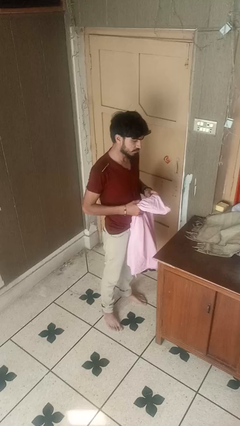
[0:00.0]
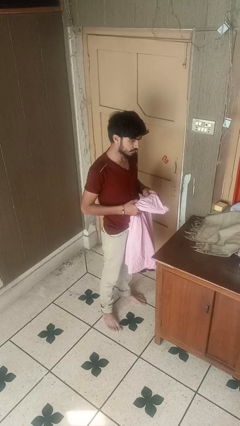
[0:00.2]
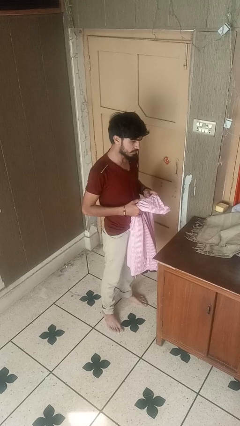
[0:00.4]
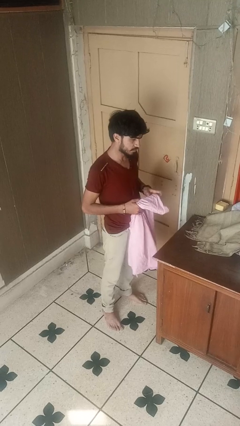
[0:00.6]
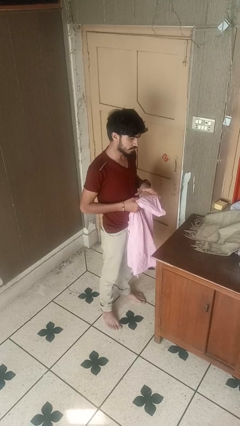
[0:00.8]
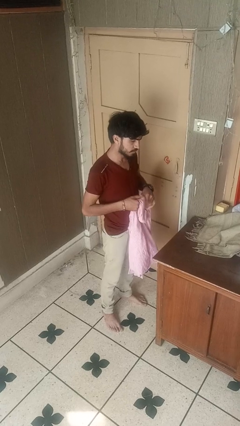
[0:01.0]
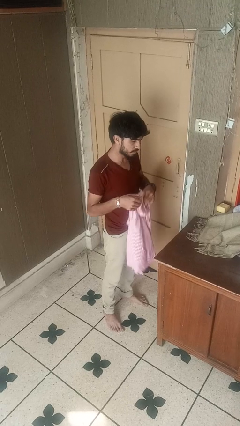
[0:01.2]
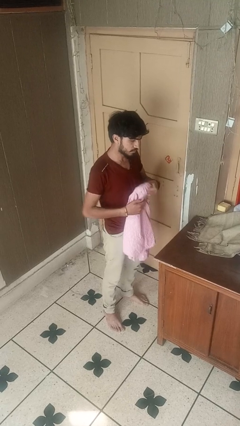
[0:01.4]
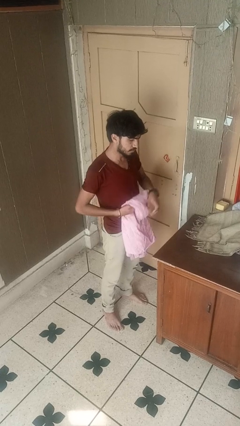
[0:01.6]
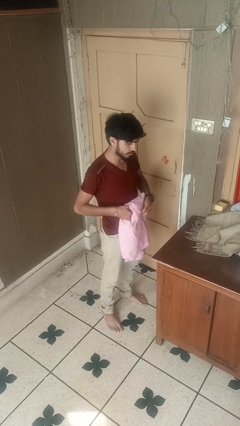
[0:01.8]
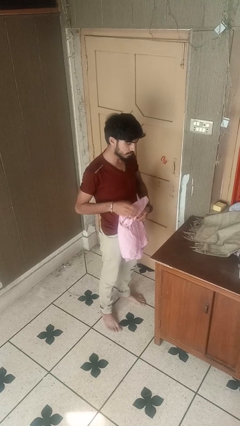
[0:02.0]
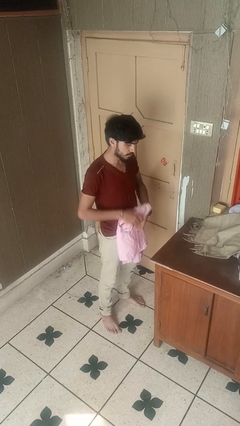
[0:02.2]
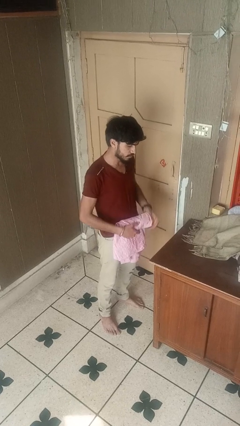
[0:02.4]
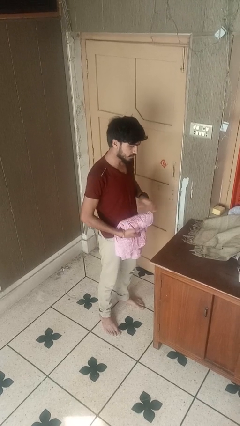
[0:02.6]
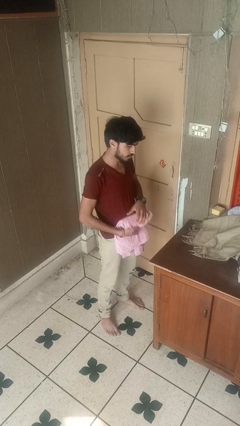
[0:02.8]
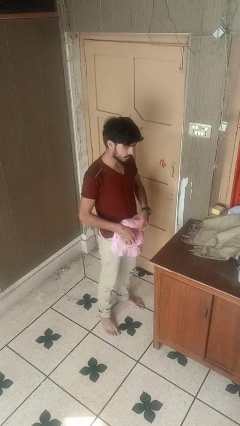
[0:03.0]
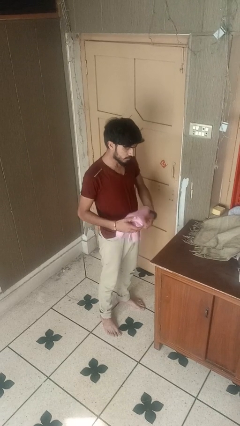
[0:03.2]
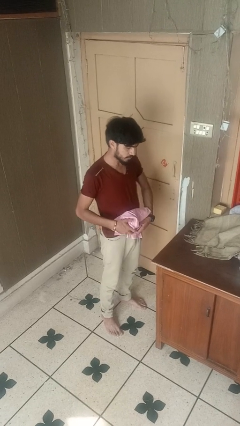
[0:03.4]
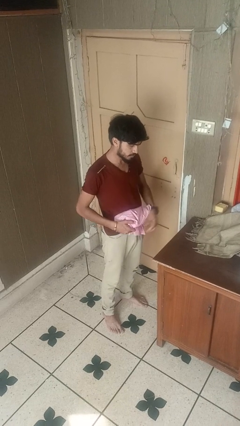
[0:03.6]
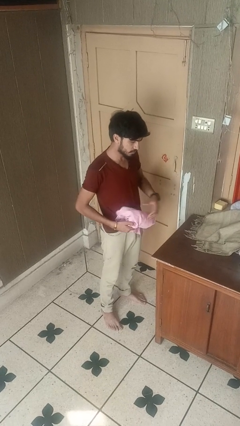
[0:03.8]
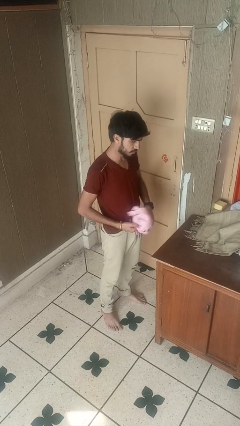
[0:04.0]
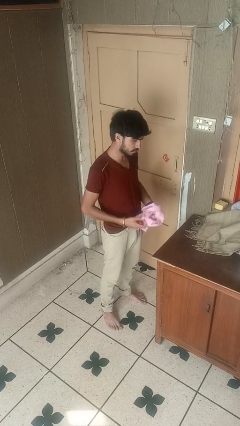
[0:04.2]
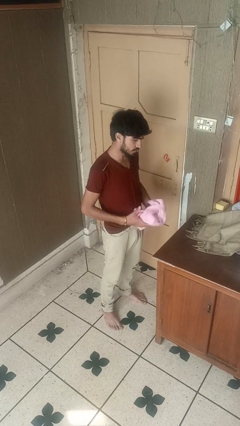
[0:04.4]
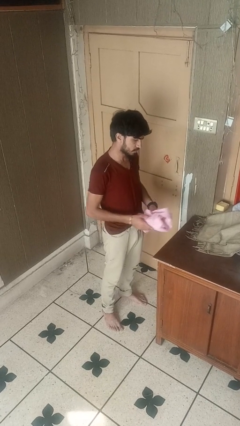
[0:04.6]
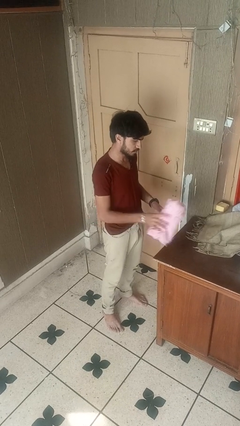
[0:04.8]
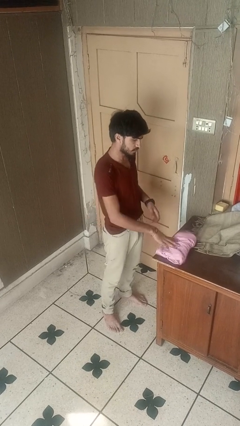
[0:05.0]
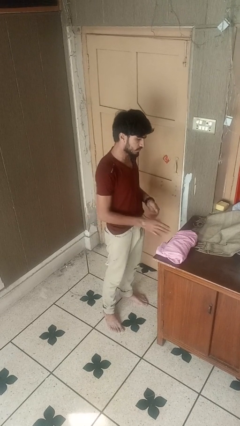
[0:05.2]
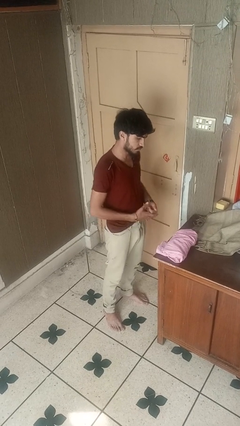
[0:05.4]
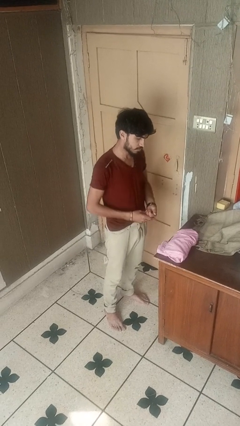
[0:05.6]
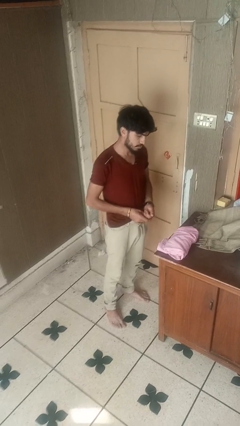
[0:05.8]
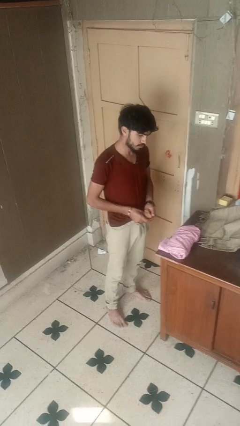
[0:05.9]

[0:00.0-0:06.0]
person folds shirt

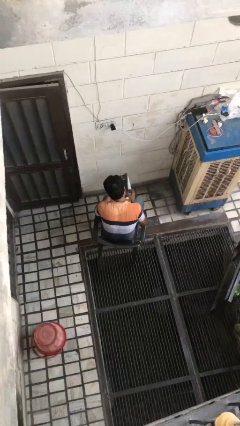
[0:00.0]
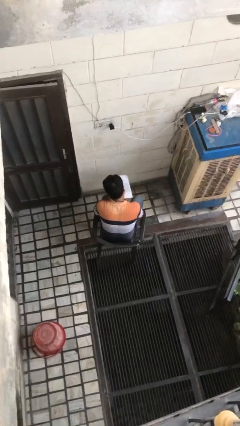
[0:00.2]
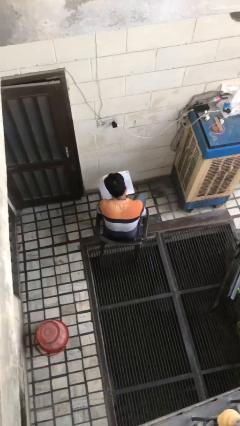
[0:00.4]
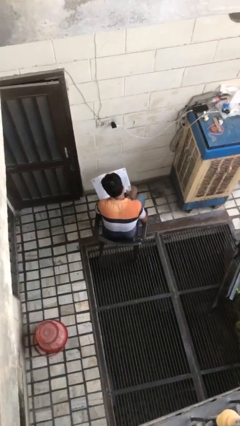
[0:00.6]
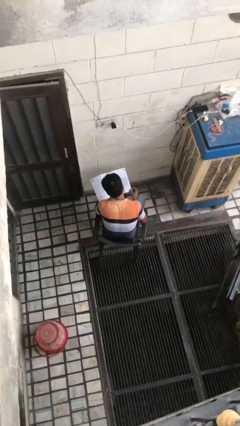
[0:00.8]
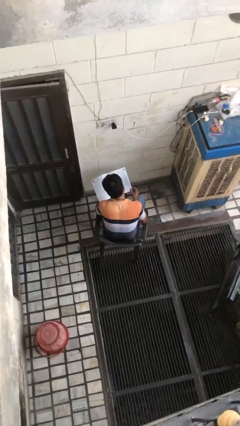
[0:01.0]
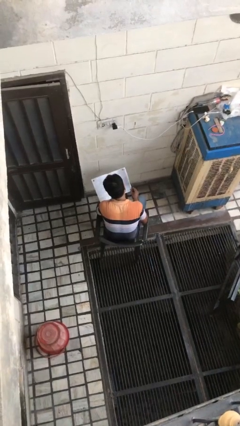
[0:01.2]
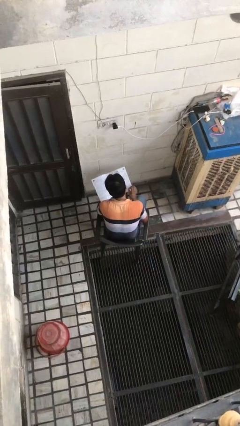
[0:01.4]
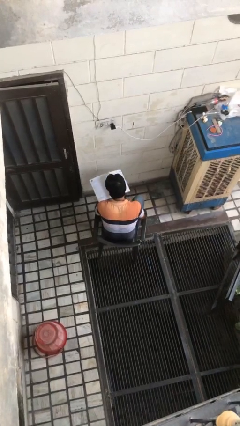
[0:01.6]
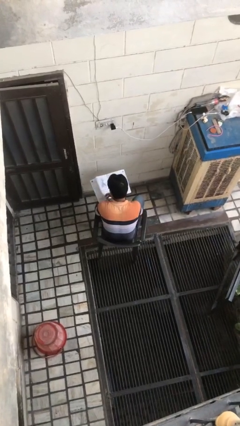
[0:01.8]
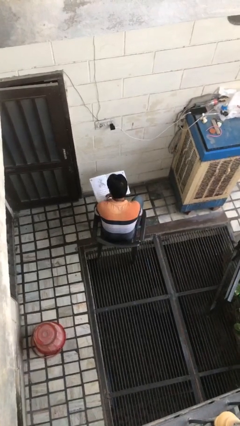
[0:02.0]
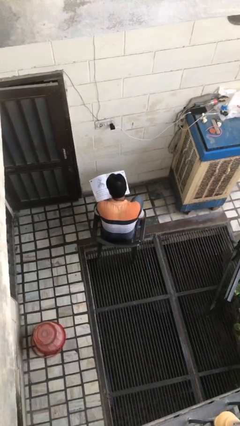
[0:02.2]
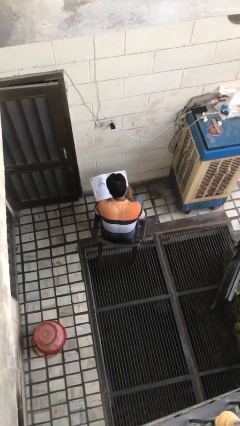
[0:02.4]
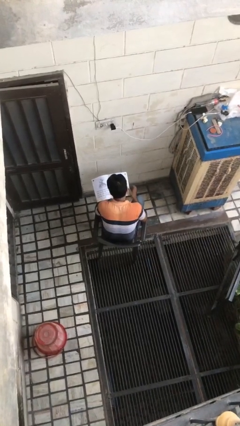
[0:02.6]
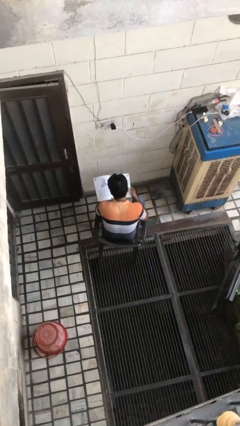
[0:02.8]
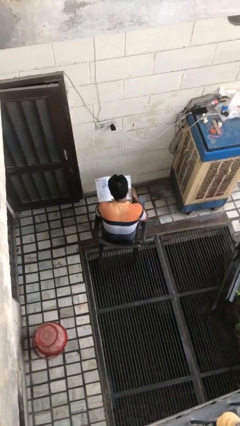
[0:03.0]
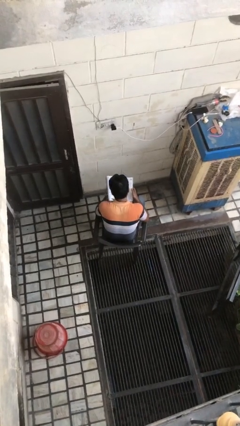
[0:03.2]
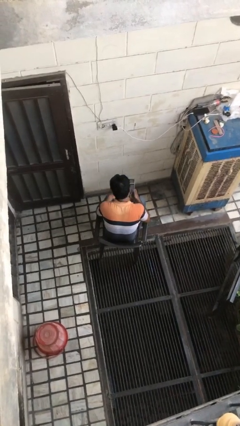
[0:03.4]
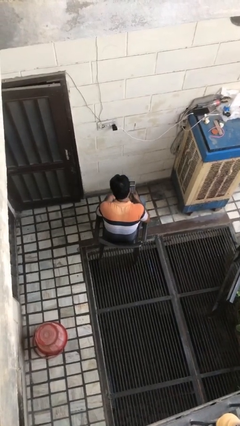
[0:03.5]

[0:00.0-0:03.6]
person reads magazine

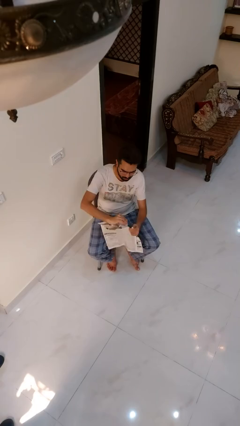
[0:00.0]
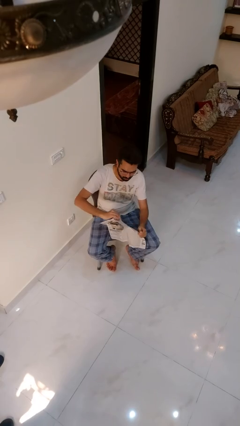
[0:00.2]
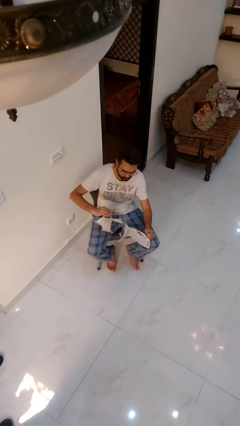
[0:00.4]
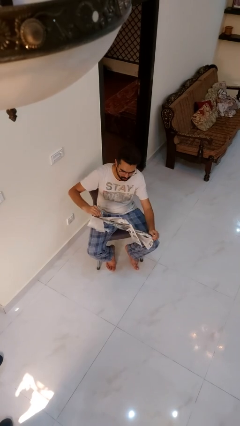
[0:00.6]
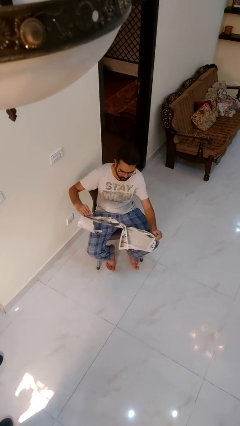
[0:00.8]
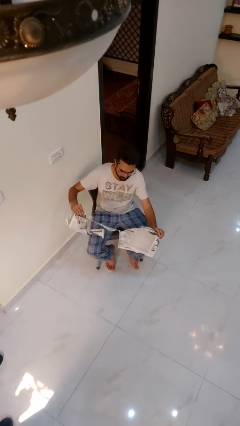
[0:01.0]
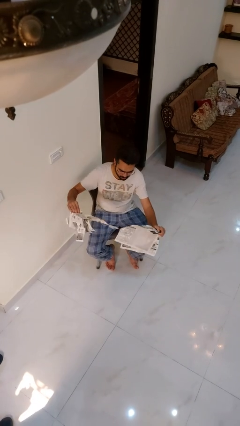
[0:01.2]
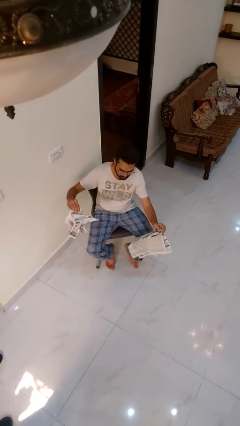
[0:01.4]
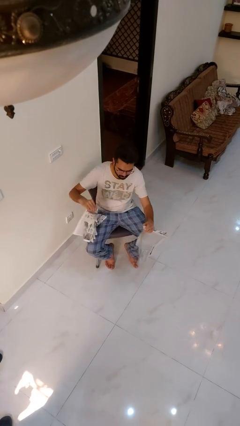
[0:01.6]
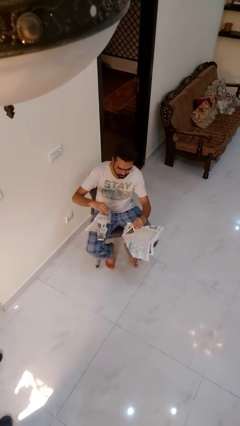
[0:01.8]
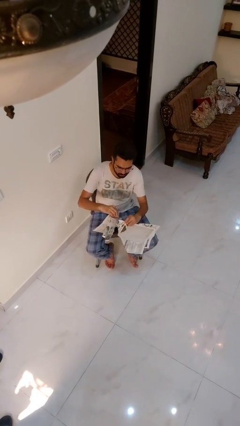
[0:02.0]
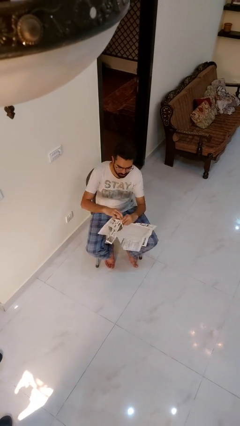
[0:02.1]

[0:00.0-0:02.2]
person tears paper

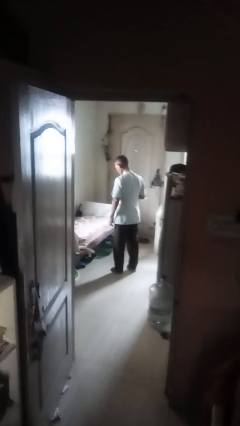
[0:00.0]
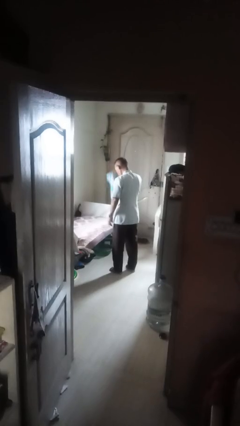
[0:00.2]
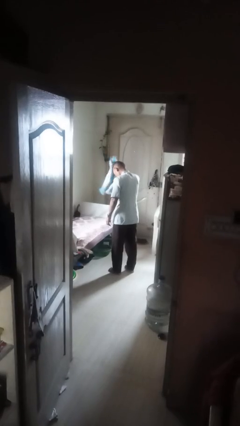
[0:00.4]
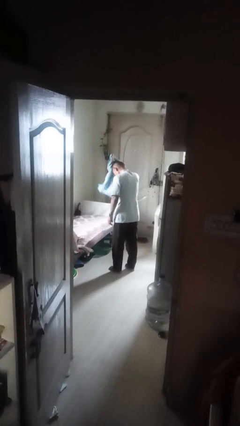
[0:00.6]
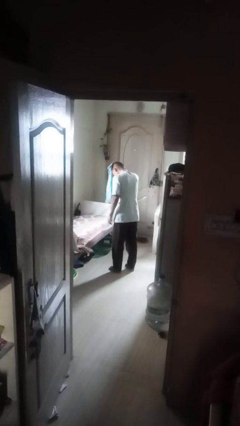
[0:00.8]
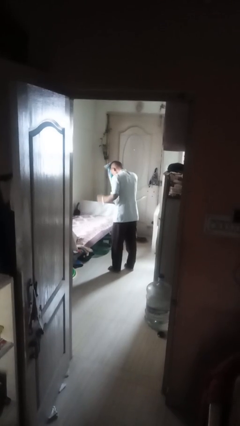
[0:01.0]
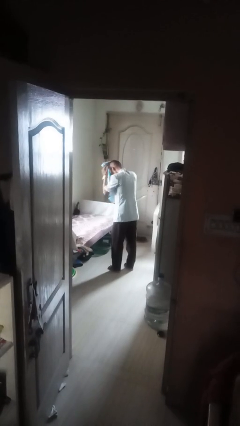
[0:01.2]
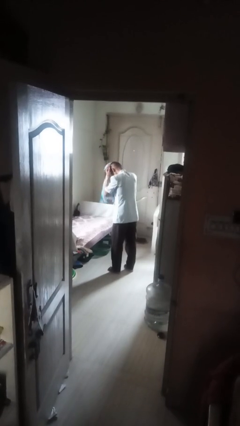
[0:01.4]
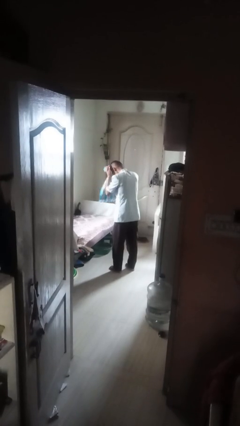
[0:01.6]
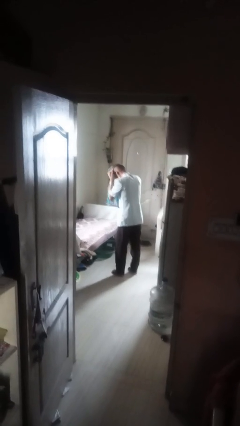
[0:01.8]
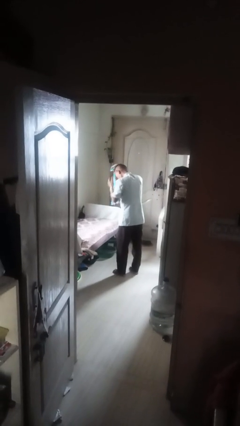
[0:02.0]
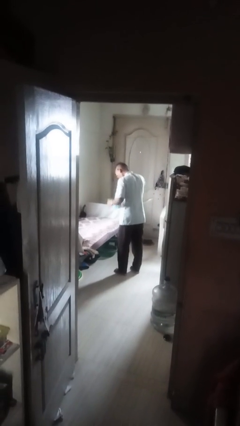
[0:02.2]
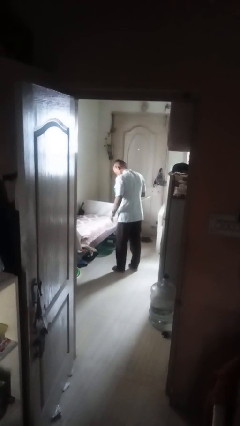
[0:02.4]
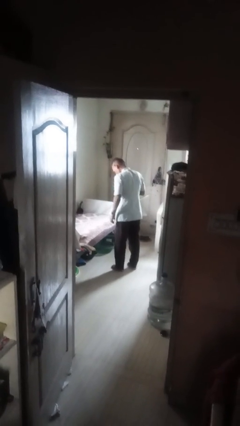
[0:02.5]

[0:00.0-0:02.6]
person dries hair with towel

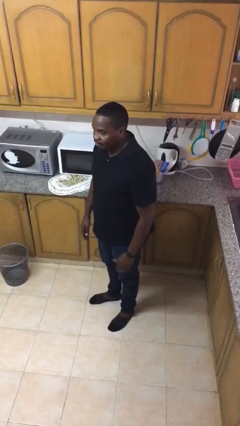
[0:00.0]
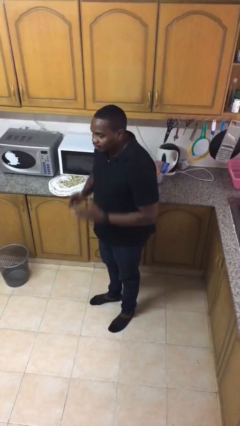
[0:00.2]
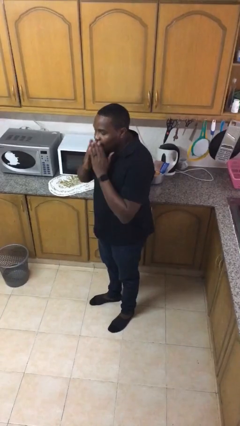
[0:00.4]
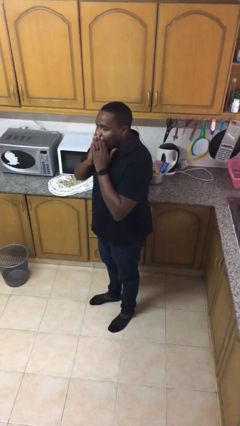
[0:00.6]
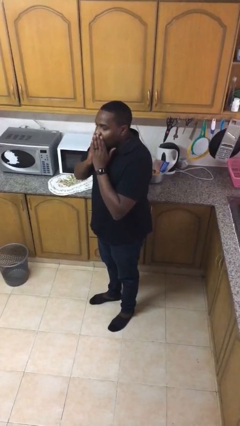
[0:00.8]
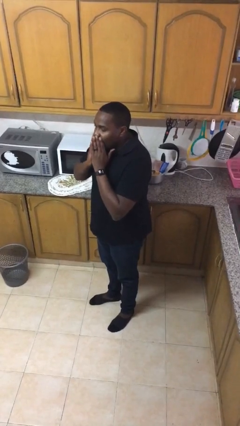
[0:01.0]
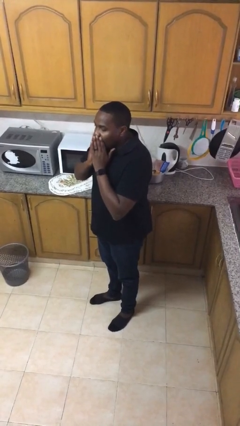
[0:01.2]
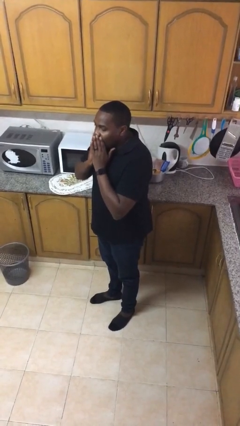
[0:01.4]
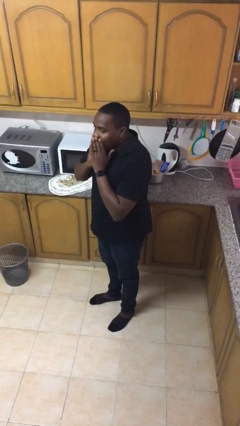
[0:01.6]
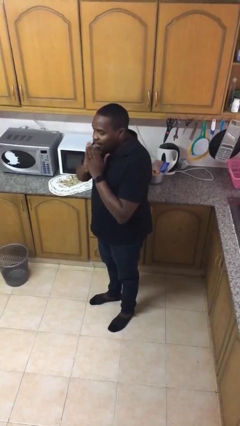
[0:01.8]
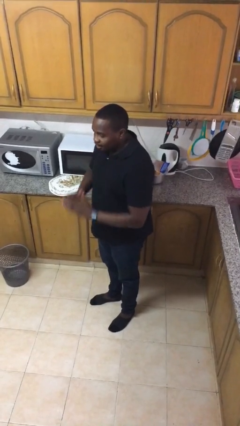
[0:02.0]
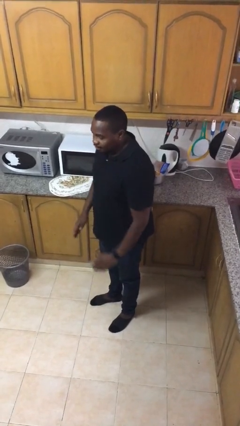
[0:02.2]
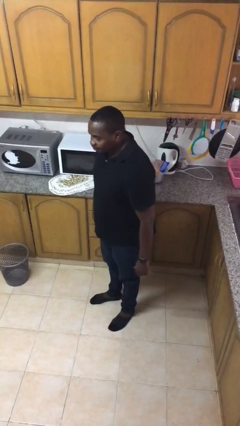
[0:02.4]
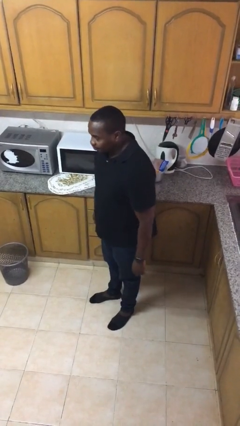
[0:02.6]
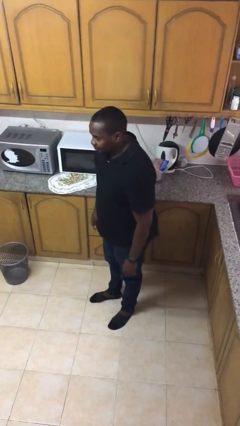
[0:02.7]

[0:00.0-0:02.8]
person yawns

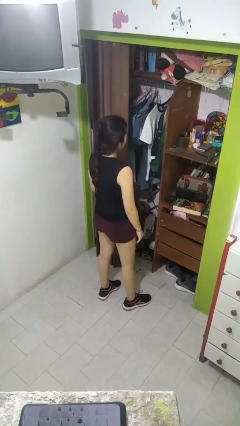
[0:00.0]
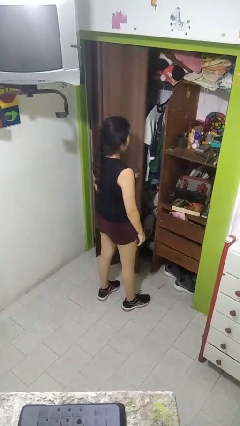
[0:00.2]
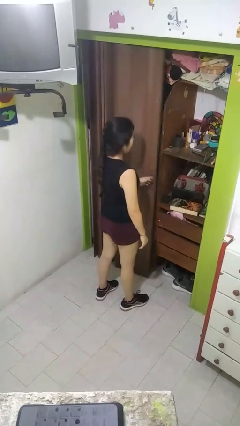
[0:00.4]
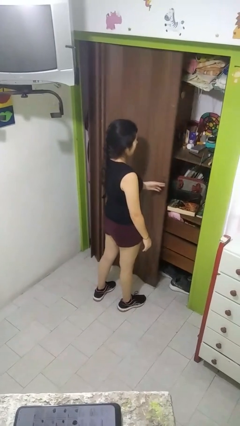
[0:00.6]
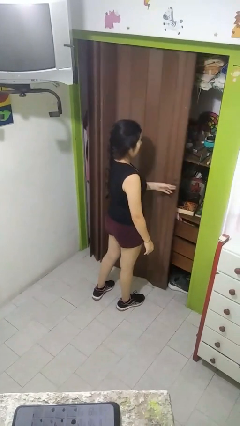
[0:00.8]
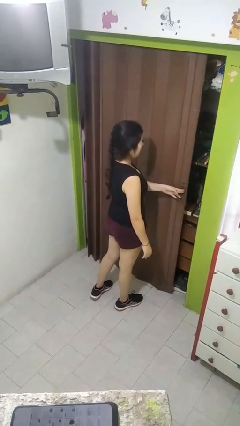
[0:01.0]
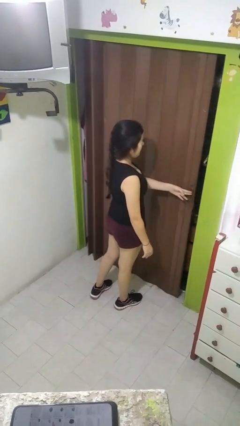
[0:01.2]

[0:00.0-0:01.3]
person closes closet door
